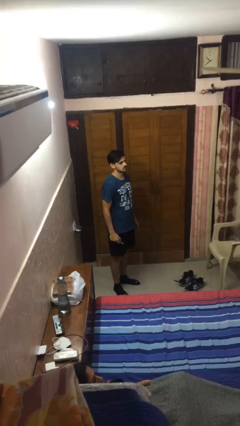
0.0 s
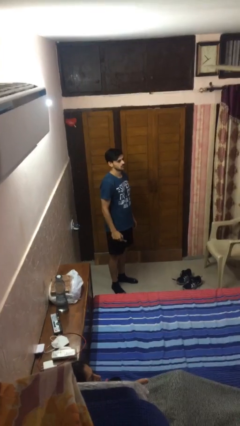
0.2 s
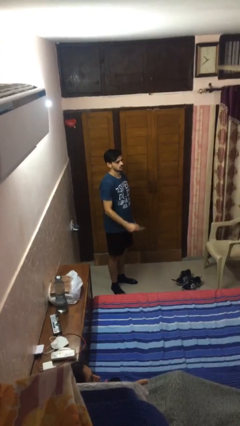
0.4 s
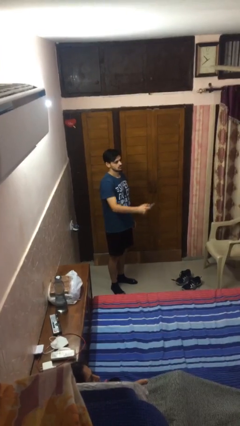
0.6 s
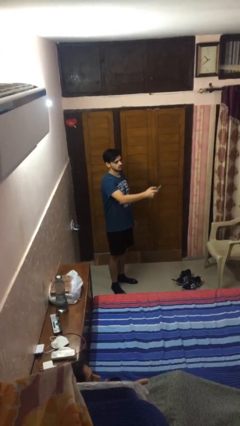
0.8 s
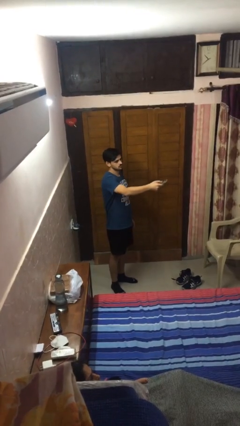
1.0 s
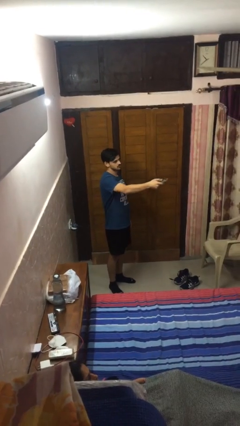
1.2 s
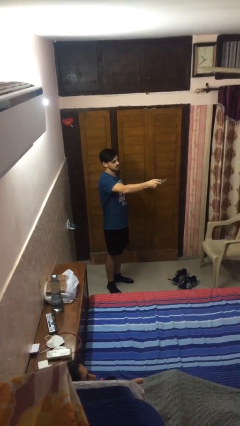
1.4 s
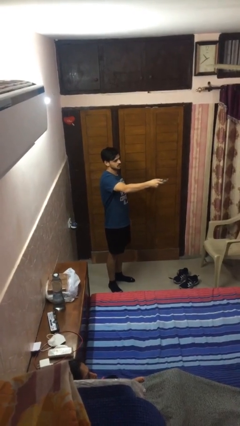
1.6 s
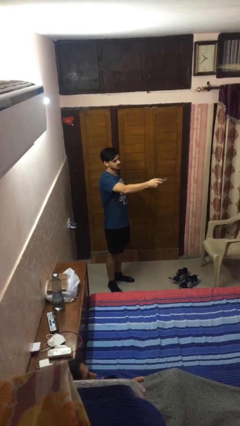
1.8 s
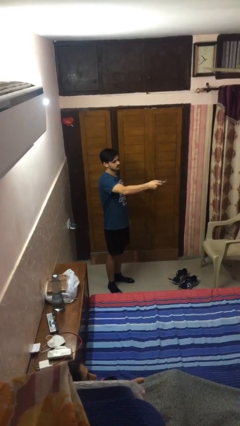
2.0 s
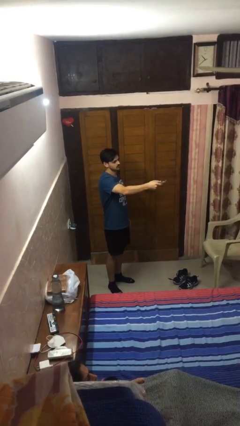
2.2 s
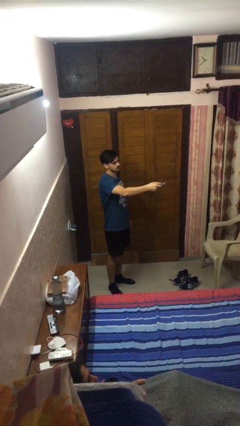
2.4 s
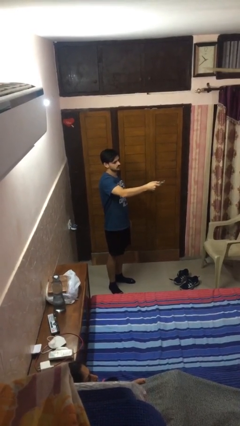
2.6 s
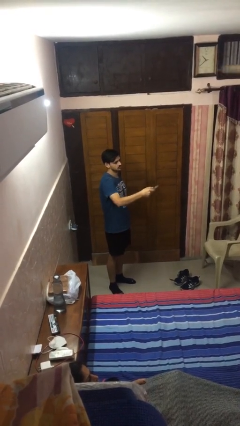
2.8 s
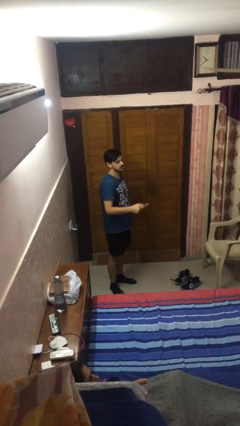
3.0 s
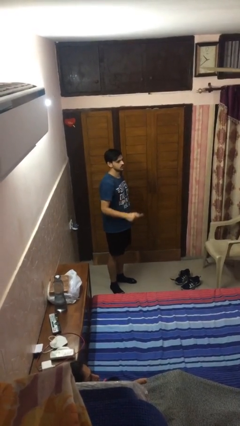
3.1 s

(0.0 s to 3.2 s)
person uses television remote

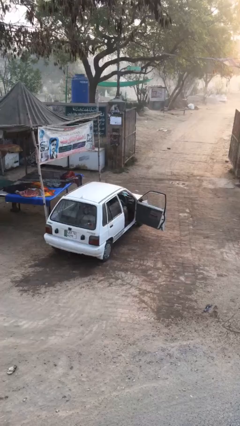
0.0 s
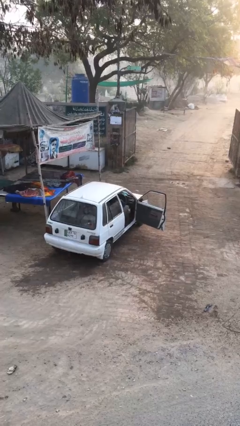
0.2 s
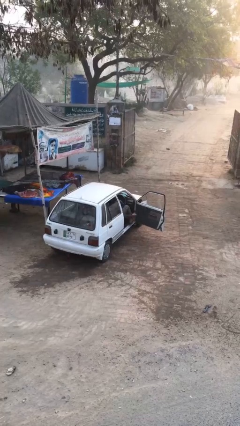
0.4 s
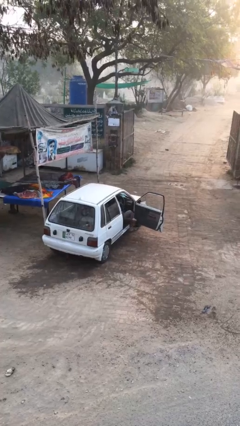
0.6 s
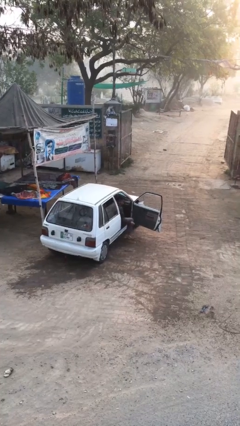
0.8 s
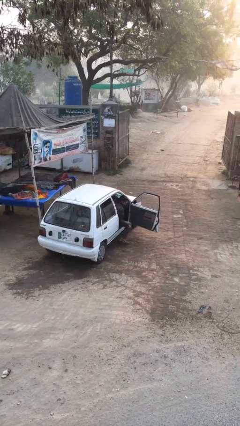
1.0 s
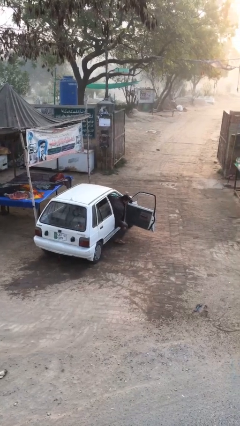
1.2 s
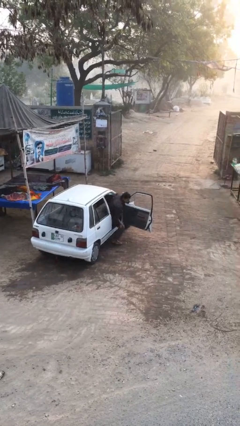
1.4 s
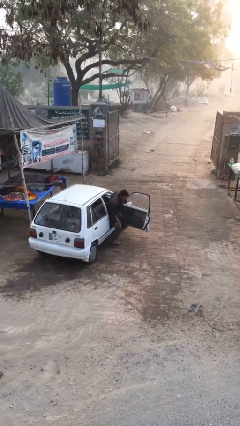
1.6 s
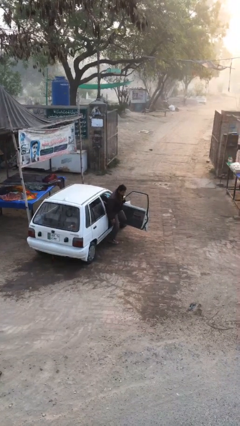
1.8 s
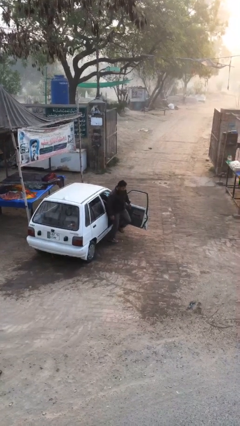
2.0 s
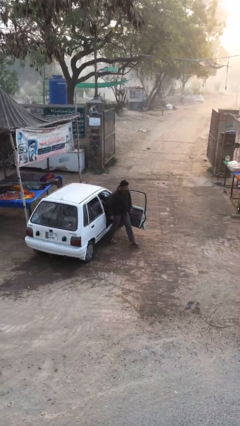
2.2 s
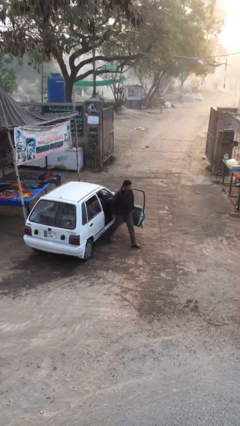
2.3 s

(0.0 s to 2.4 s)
person exits car

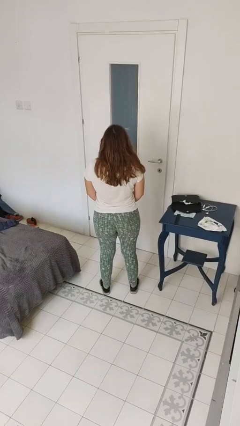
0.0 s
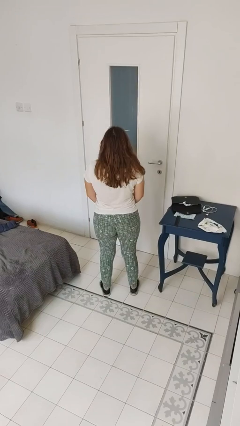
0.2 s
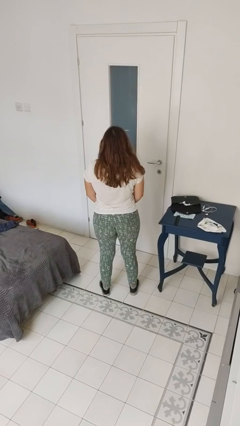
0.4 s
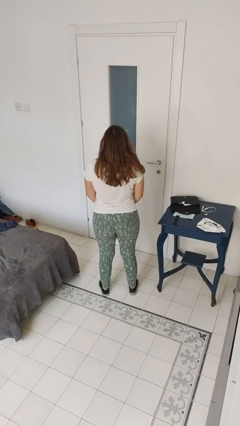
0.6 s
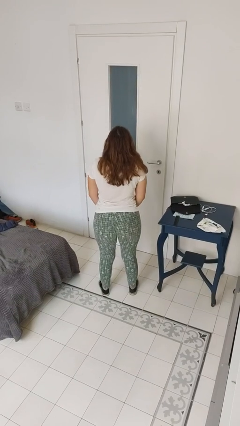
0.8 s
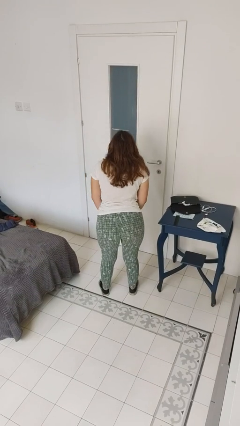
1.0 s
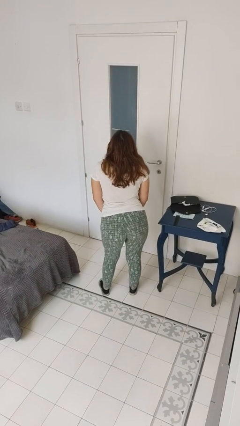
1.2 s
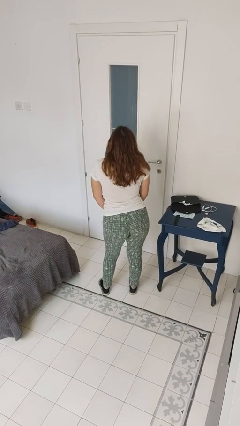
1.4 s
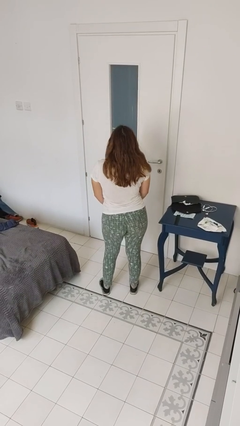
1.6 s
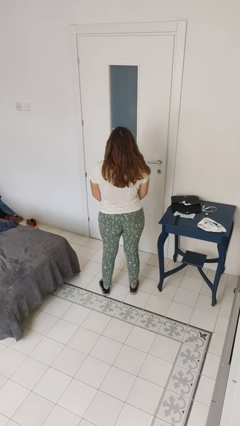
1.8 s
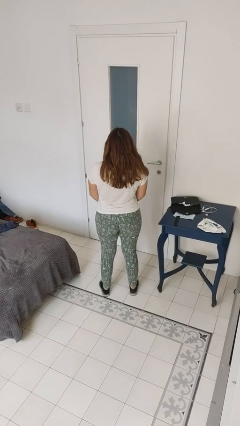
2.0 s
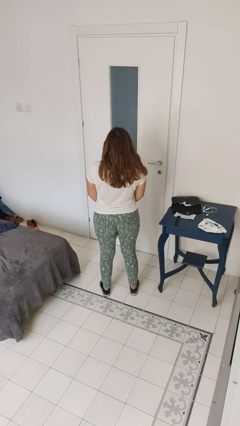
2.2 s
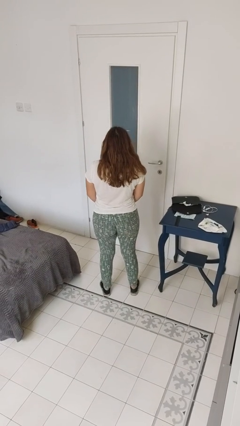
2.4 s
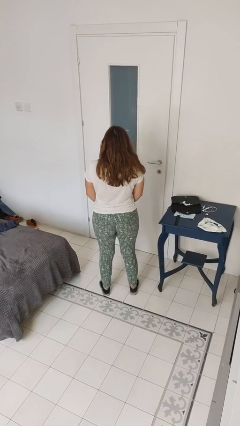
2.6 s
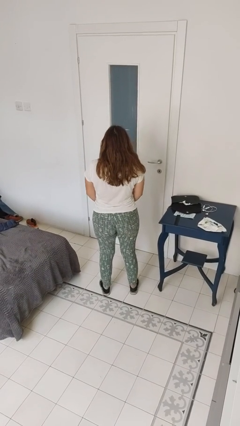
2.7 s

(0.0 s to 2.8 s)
person wiggles hips

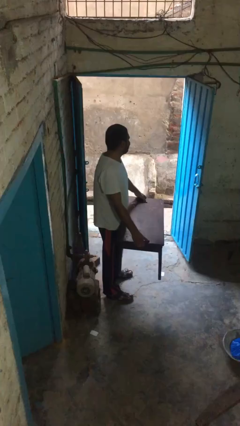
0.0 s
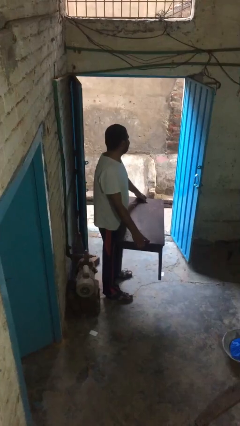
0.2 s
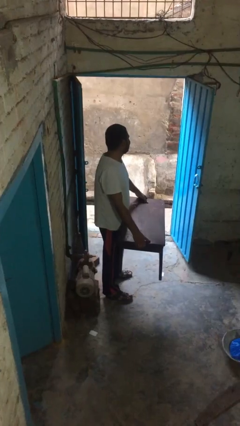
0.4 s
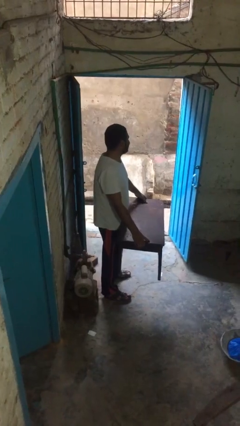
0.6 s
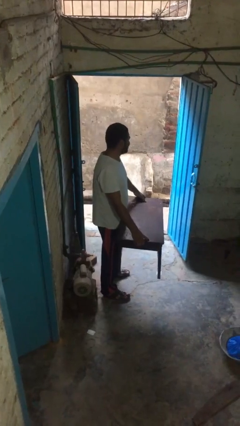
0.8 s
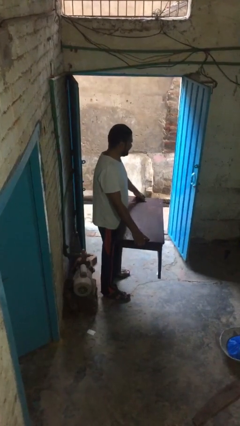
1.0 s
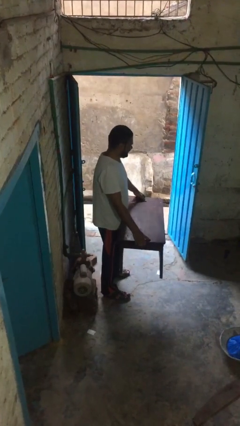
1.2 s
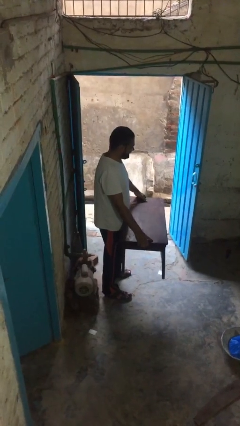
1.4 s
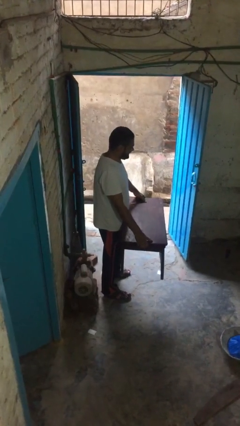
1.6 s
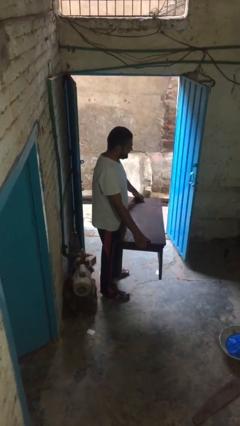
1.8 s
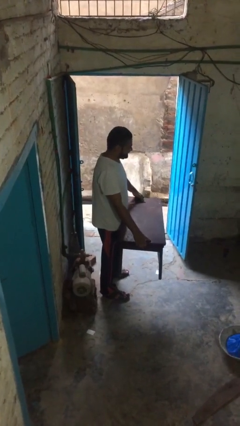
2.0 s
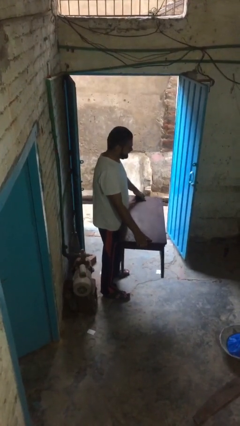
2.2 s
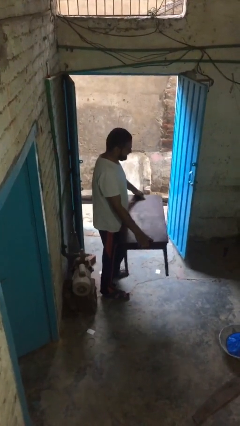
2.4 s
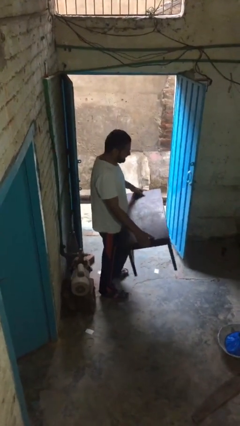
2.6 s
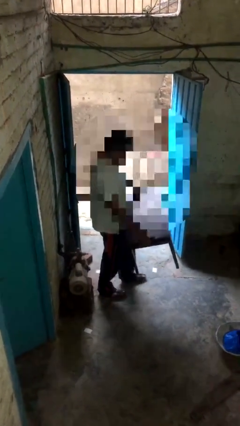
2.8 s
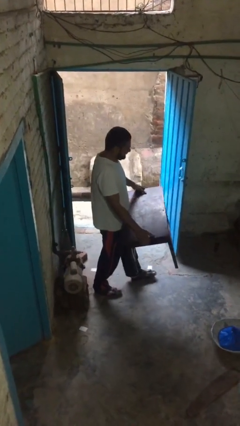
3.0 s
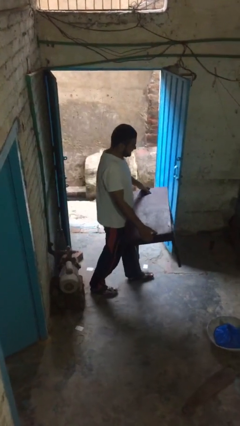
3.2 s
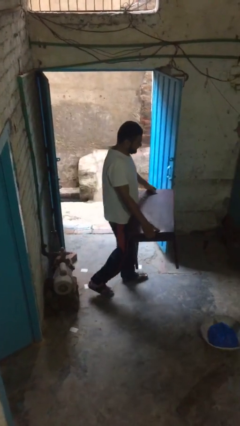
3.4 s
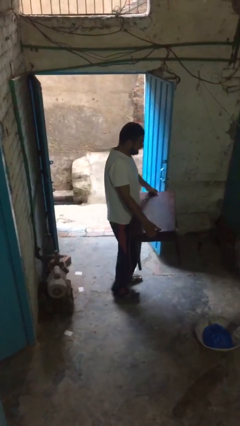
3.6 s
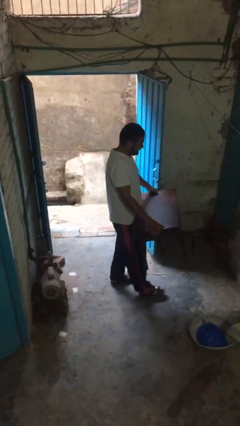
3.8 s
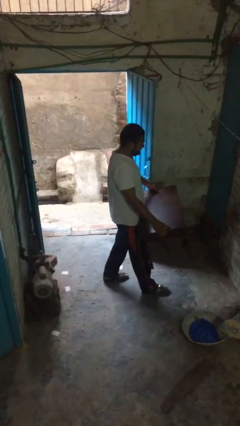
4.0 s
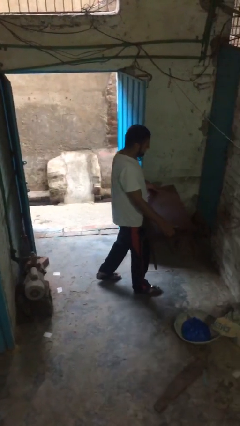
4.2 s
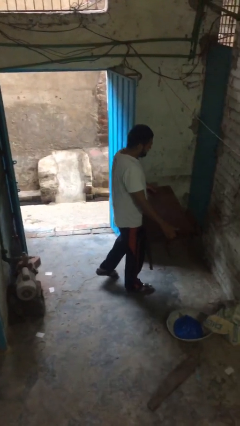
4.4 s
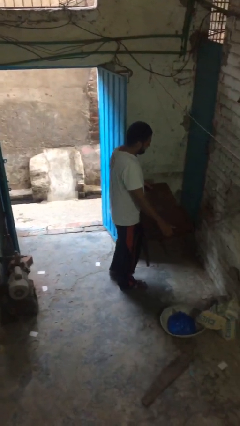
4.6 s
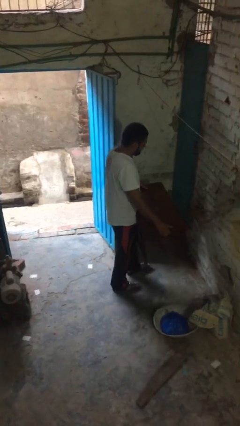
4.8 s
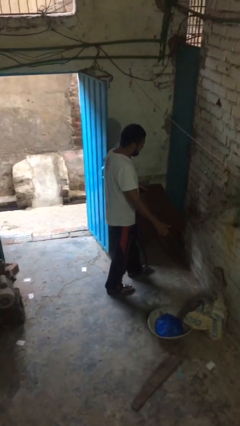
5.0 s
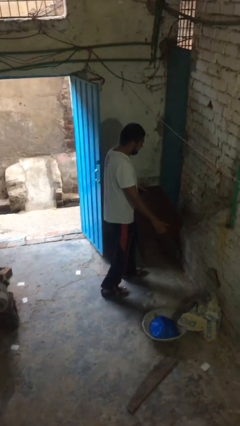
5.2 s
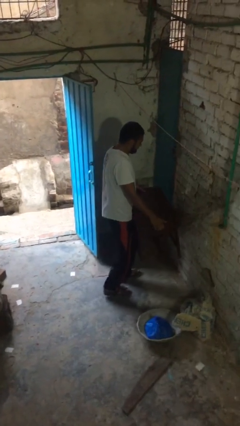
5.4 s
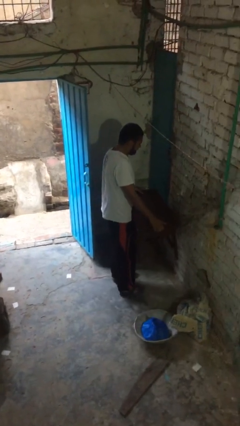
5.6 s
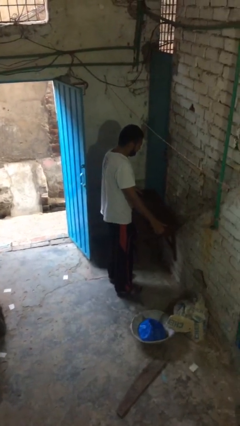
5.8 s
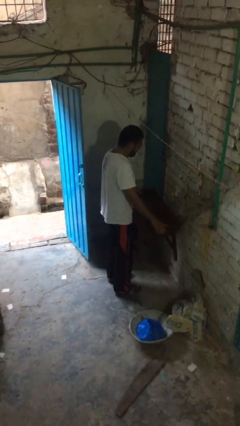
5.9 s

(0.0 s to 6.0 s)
person carries heavy object

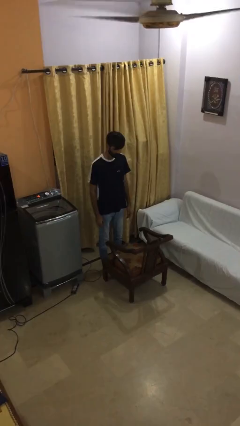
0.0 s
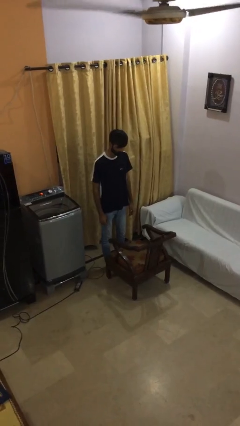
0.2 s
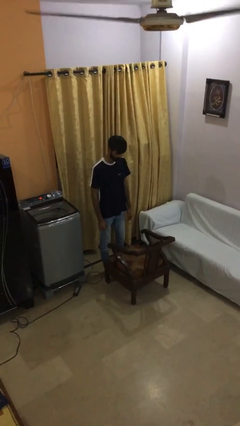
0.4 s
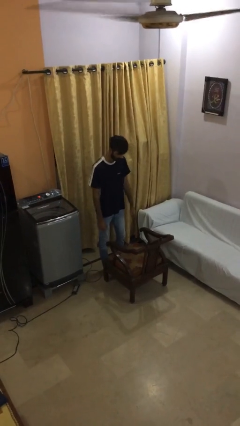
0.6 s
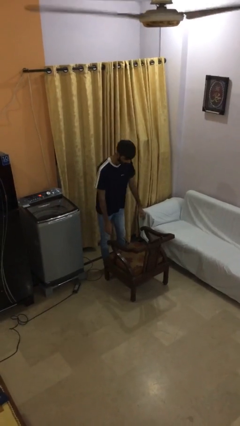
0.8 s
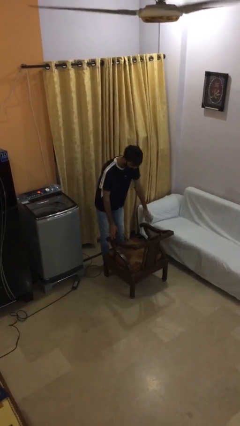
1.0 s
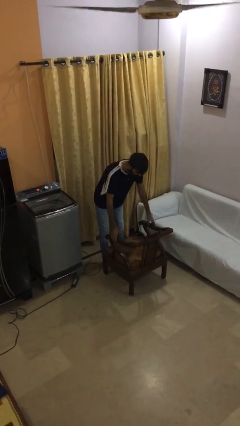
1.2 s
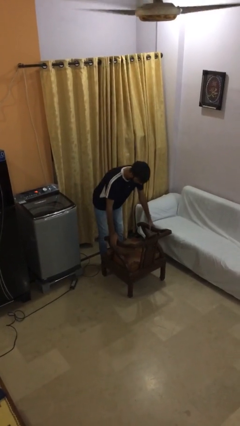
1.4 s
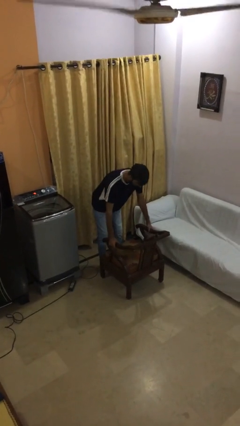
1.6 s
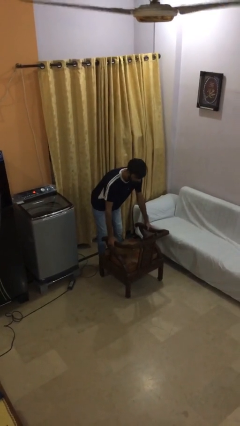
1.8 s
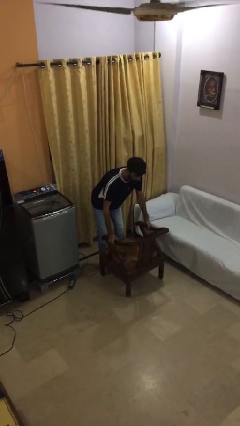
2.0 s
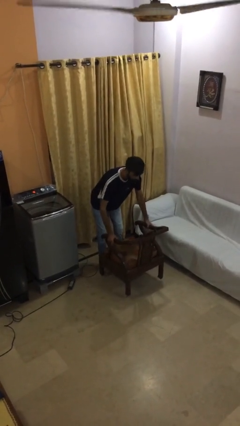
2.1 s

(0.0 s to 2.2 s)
person picks up object from floor

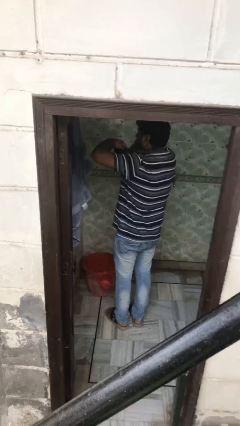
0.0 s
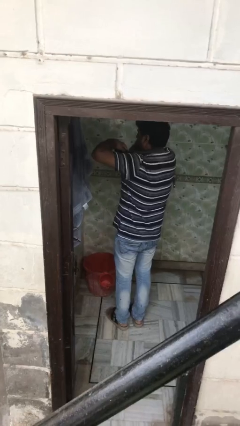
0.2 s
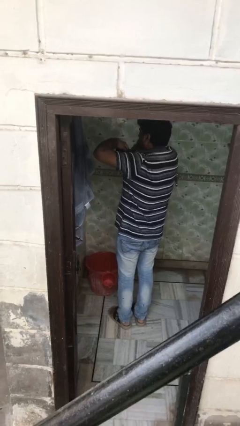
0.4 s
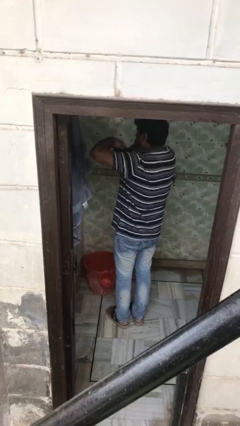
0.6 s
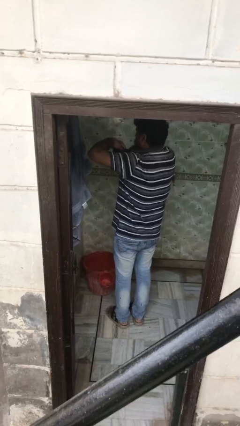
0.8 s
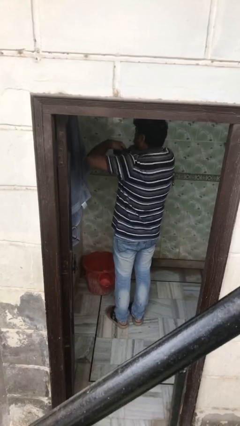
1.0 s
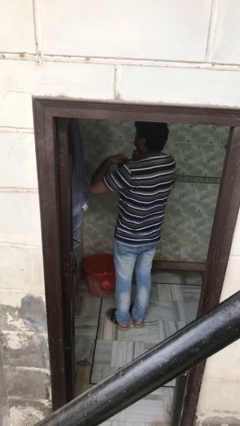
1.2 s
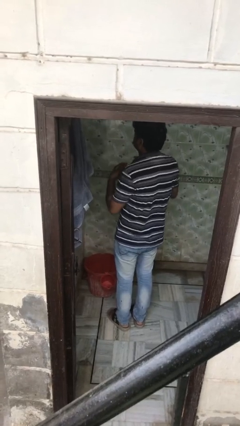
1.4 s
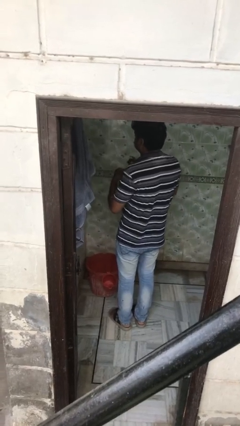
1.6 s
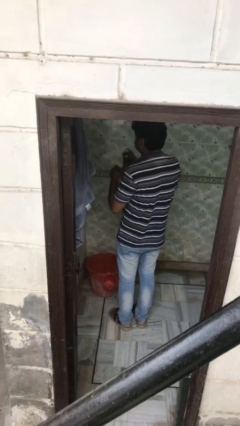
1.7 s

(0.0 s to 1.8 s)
person applies deodorant
